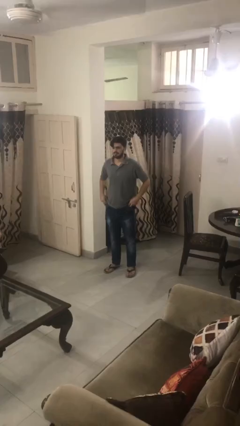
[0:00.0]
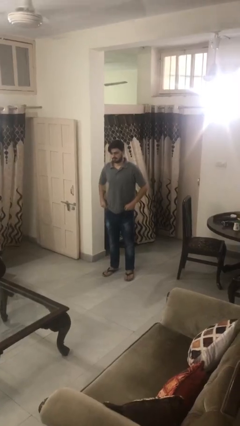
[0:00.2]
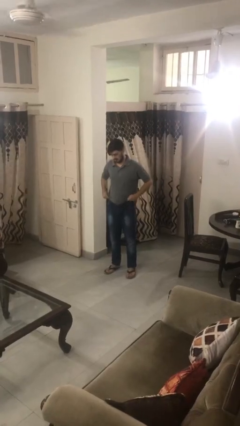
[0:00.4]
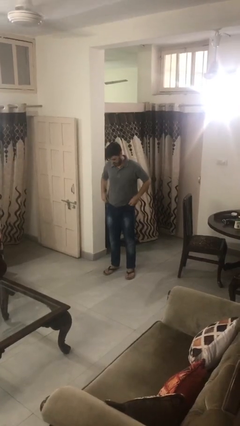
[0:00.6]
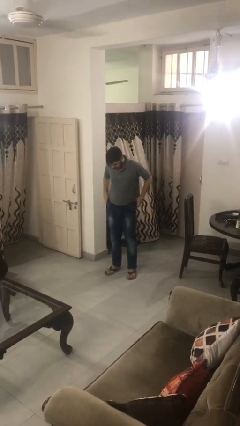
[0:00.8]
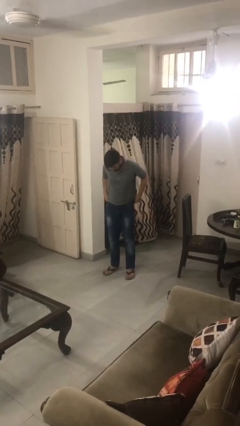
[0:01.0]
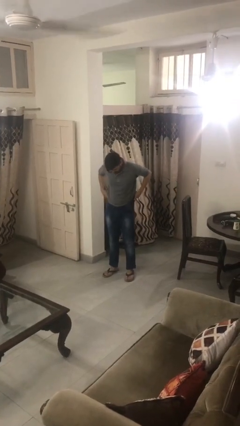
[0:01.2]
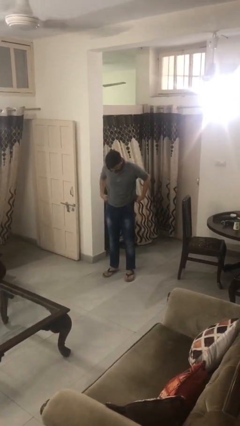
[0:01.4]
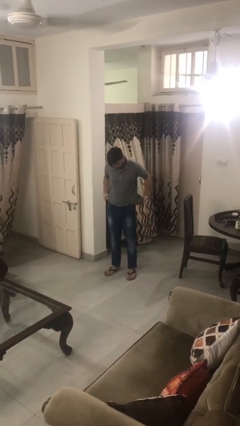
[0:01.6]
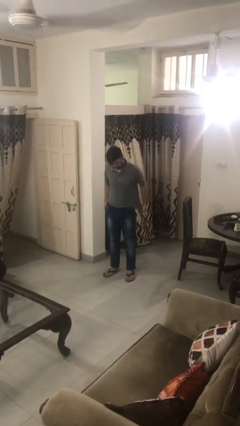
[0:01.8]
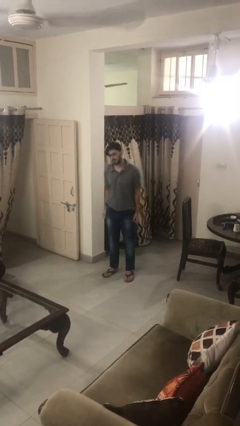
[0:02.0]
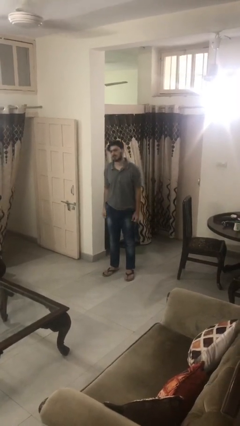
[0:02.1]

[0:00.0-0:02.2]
person hikes up pants

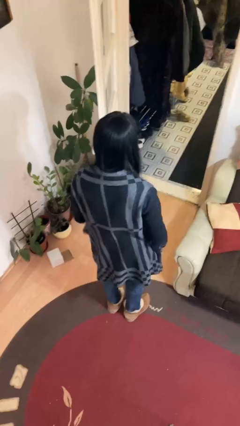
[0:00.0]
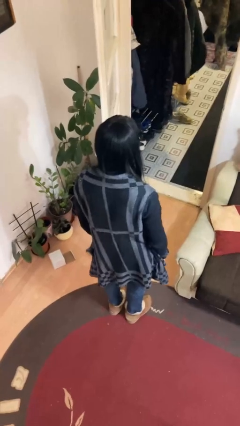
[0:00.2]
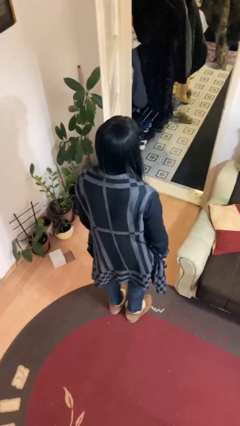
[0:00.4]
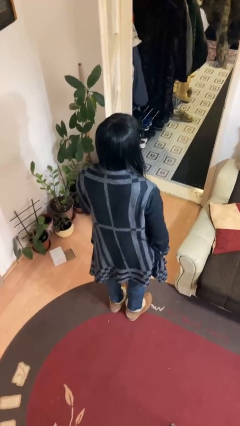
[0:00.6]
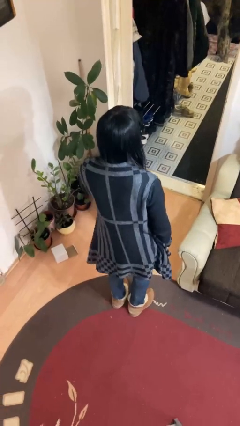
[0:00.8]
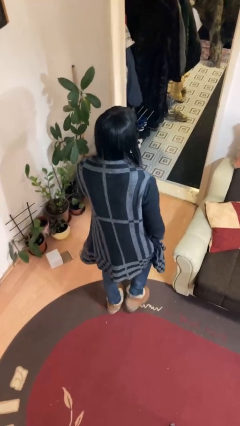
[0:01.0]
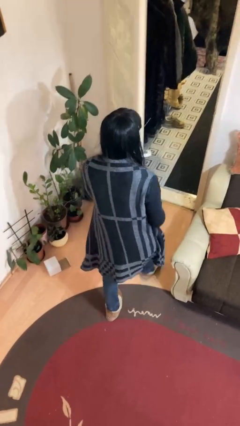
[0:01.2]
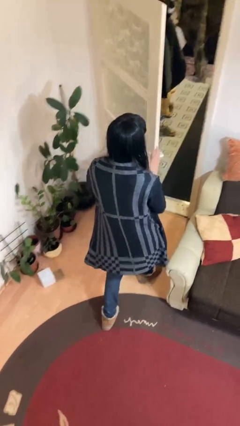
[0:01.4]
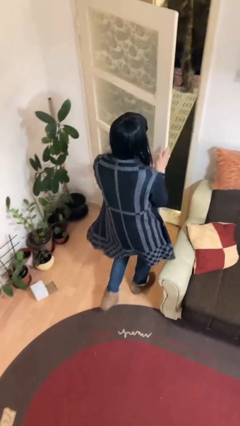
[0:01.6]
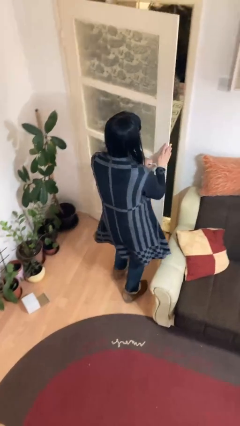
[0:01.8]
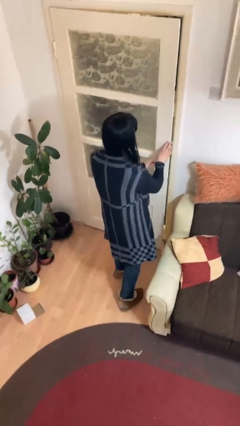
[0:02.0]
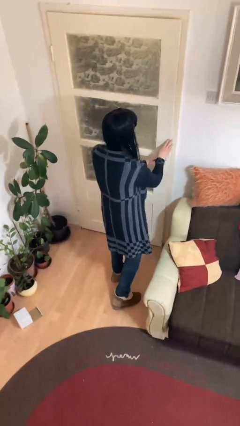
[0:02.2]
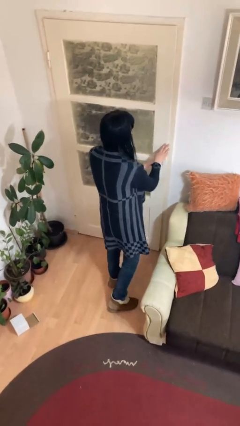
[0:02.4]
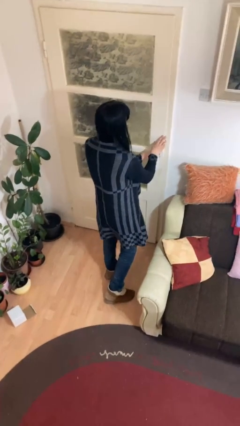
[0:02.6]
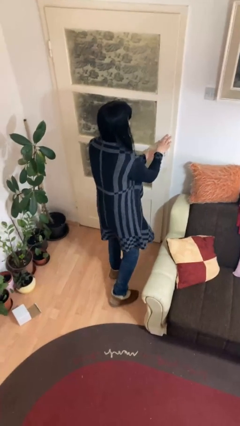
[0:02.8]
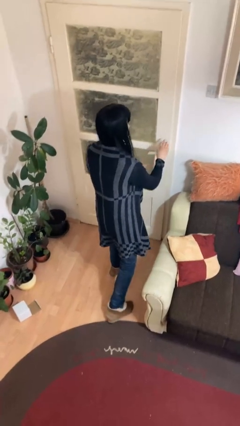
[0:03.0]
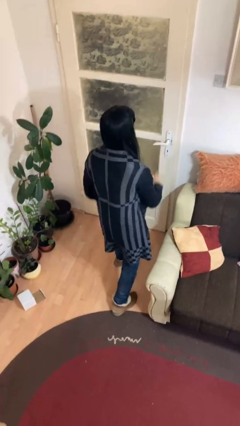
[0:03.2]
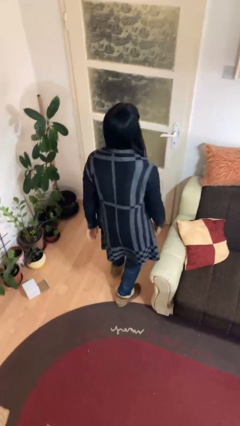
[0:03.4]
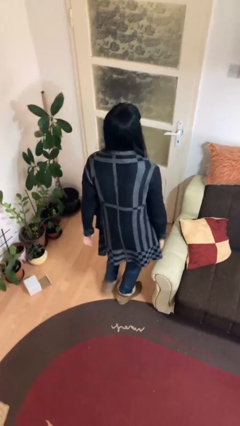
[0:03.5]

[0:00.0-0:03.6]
person closes facility door

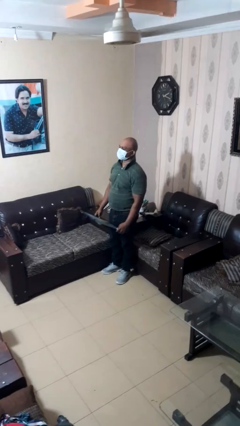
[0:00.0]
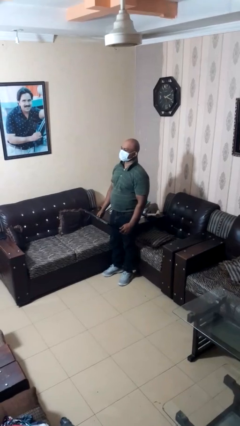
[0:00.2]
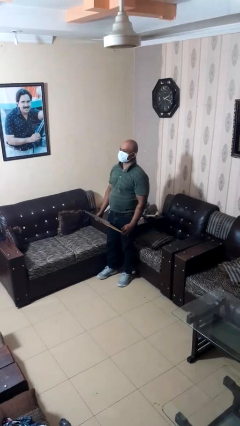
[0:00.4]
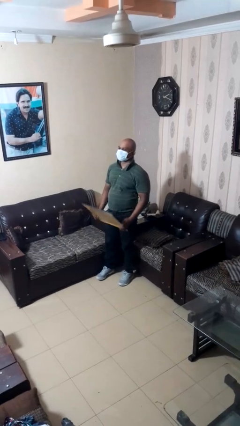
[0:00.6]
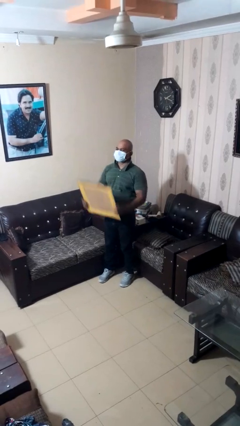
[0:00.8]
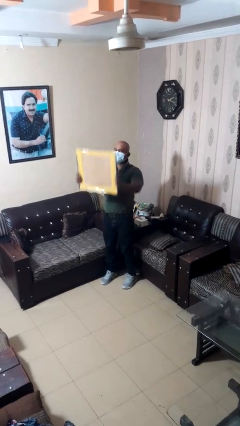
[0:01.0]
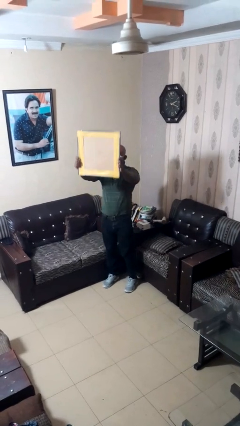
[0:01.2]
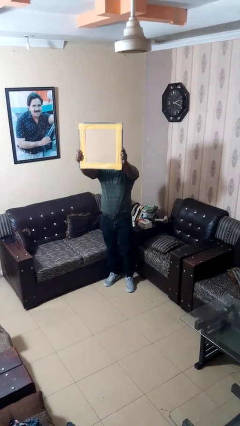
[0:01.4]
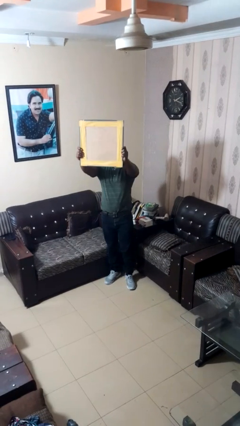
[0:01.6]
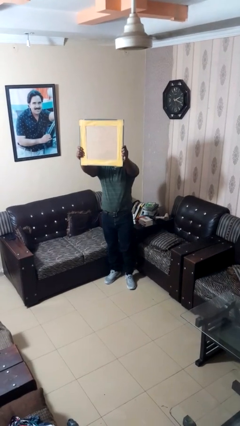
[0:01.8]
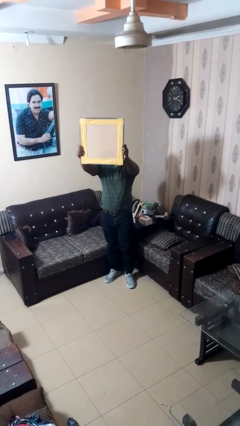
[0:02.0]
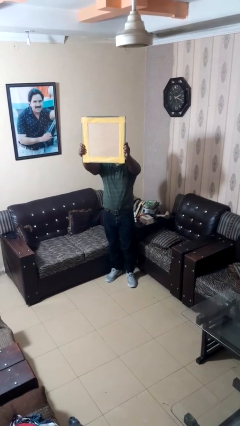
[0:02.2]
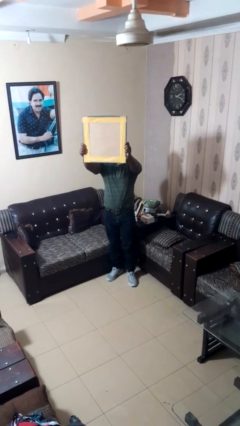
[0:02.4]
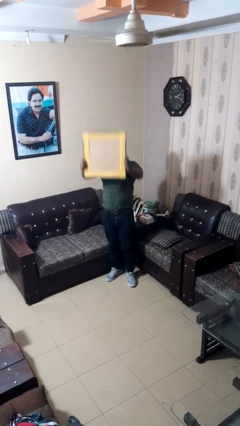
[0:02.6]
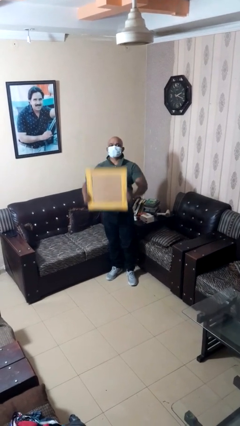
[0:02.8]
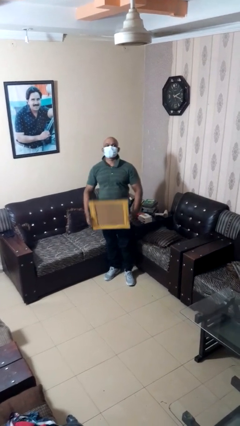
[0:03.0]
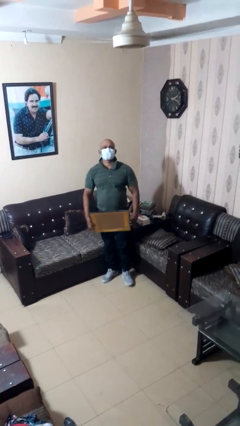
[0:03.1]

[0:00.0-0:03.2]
person holds object above head

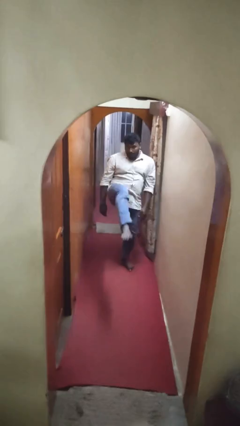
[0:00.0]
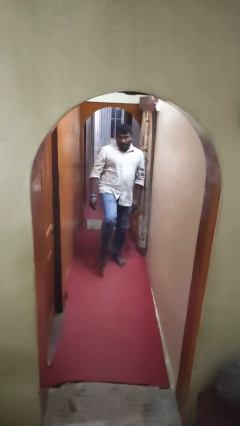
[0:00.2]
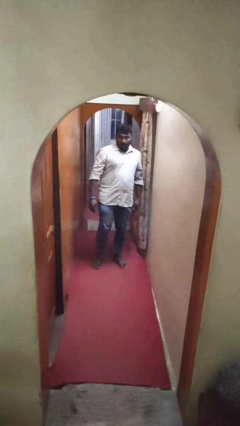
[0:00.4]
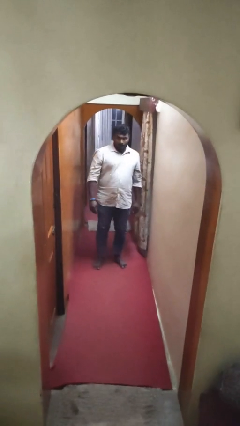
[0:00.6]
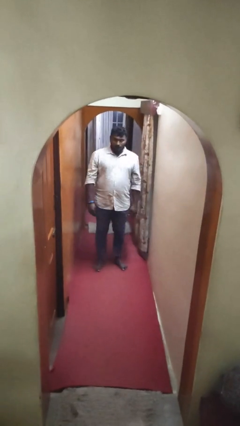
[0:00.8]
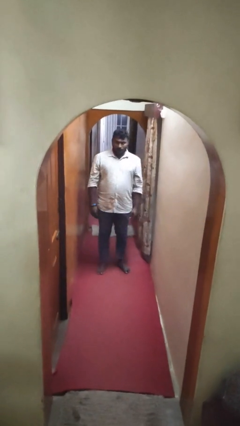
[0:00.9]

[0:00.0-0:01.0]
person karate kicks

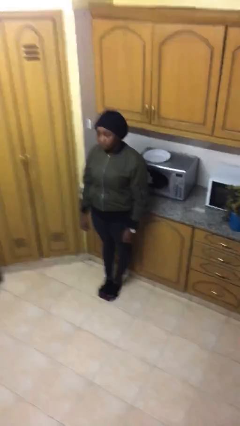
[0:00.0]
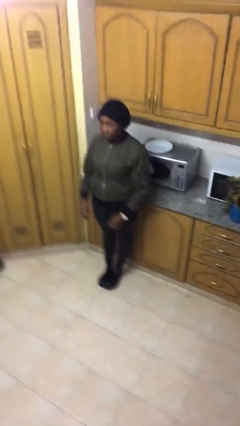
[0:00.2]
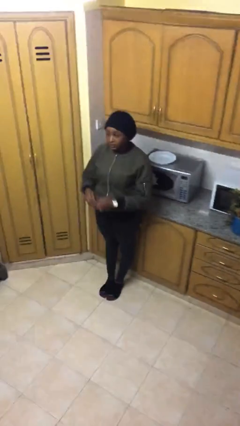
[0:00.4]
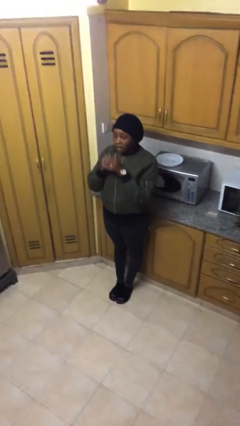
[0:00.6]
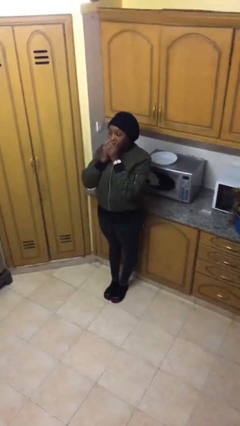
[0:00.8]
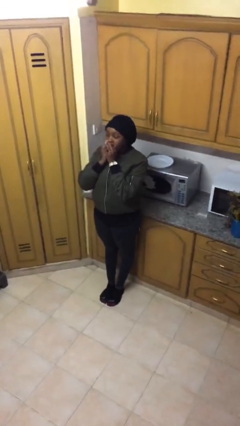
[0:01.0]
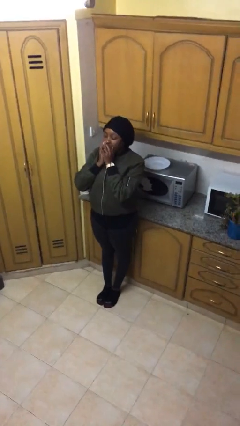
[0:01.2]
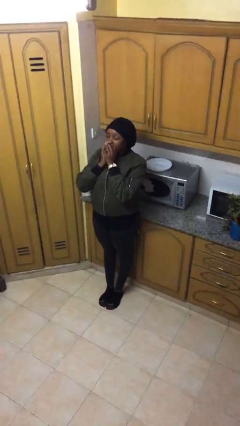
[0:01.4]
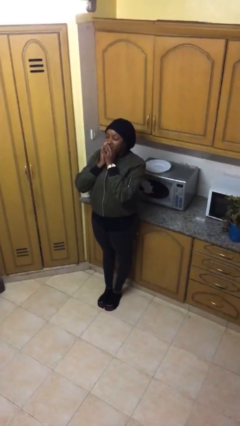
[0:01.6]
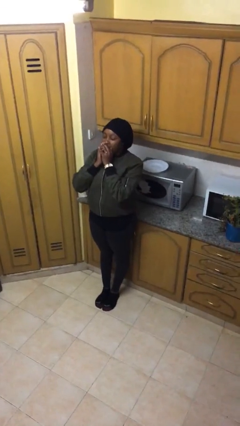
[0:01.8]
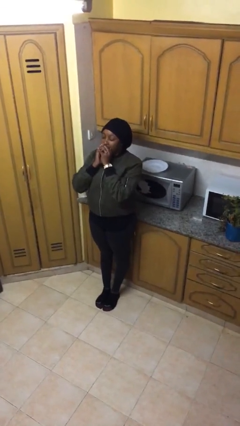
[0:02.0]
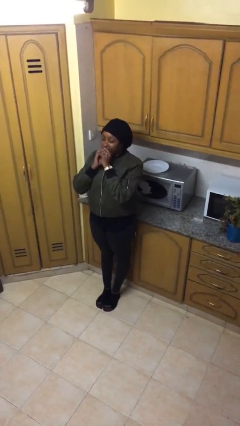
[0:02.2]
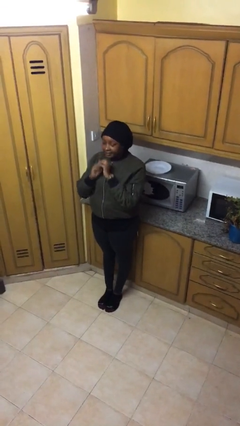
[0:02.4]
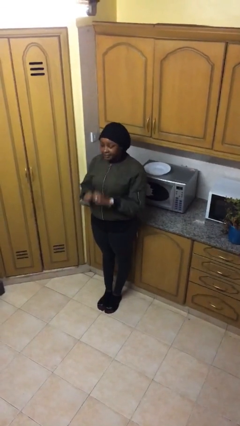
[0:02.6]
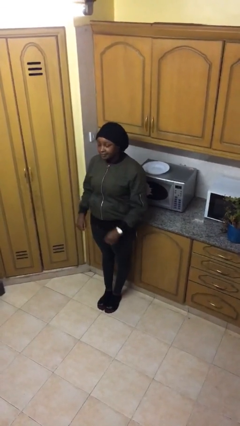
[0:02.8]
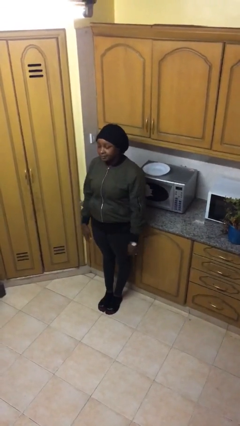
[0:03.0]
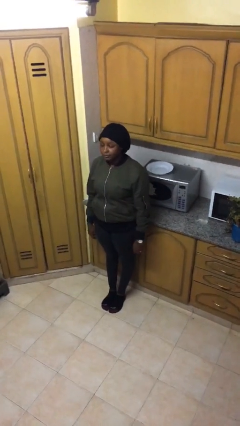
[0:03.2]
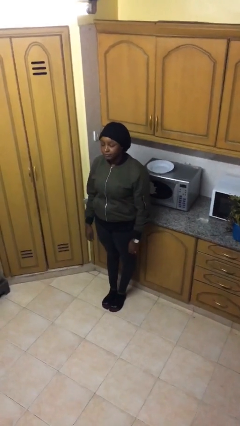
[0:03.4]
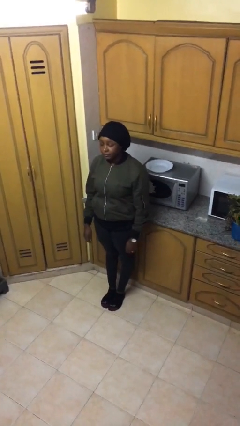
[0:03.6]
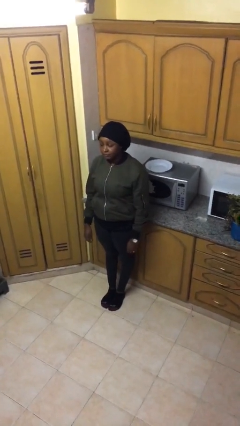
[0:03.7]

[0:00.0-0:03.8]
person yawns

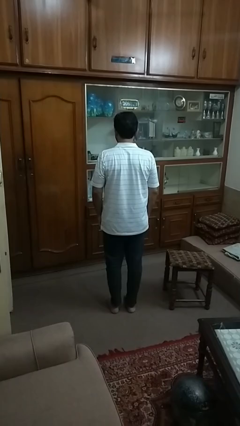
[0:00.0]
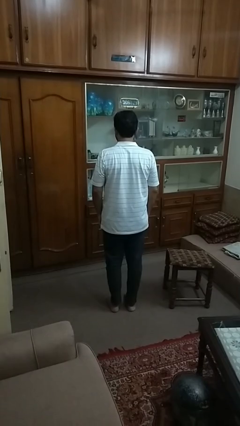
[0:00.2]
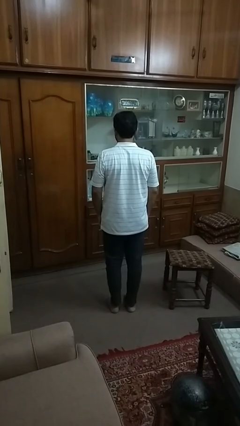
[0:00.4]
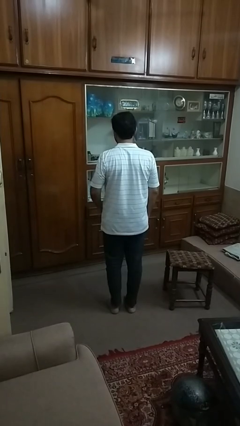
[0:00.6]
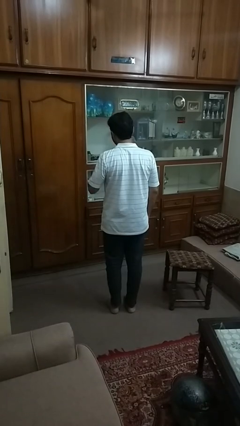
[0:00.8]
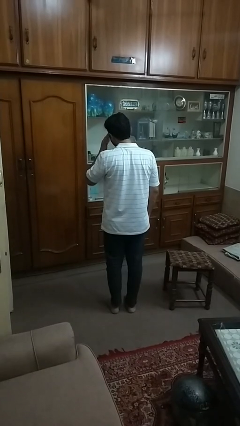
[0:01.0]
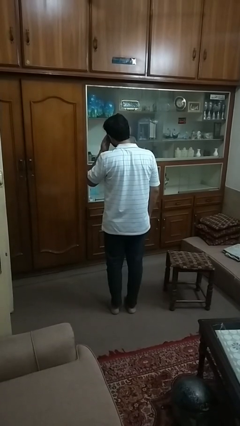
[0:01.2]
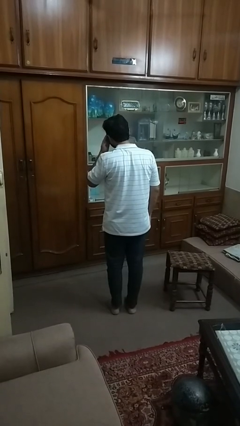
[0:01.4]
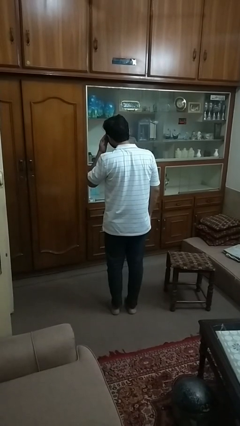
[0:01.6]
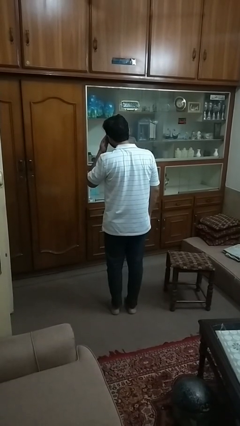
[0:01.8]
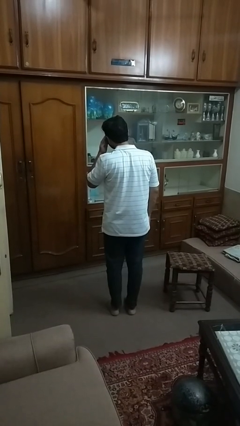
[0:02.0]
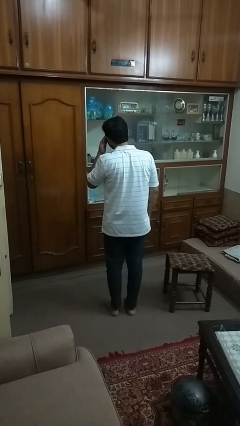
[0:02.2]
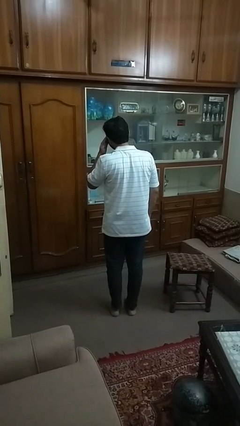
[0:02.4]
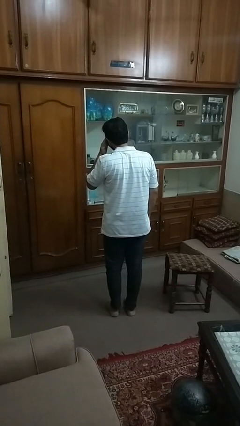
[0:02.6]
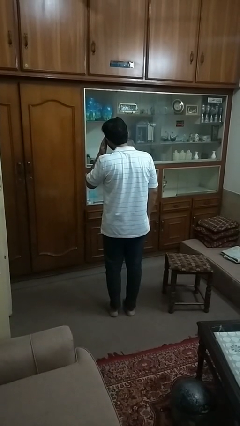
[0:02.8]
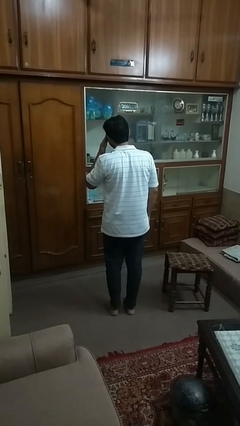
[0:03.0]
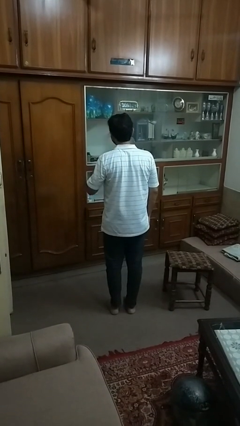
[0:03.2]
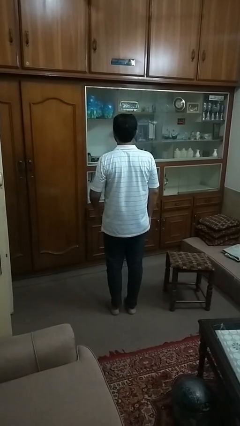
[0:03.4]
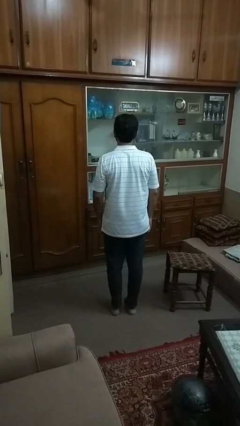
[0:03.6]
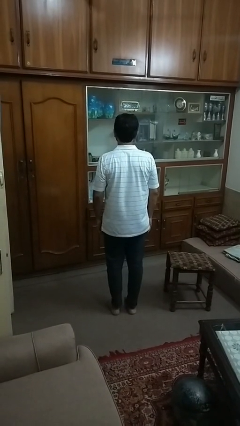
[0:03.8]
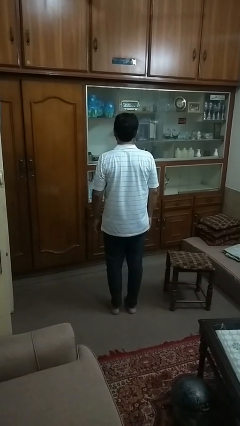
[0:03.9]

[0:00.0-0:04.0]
person rubs eyes
